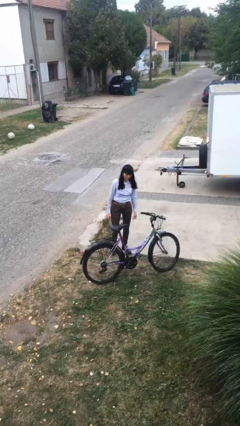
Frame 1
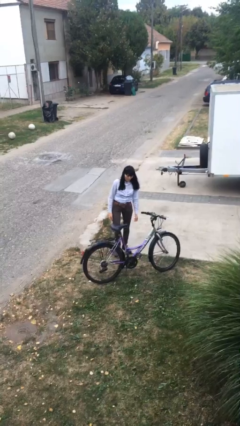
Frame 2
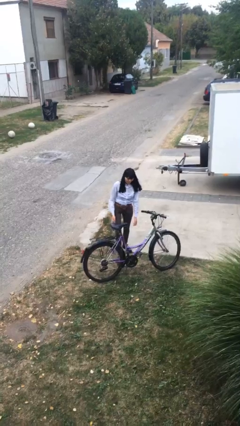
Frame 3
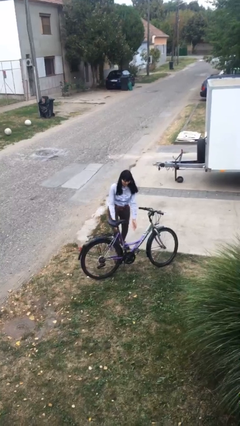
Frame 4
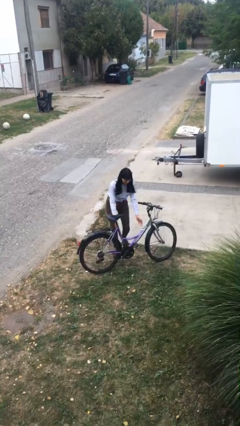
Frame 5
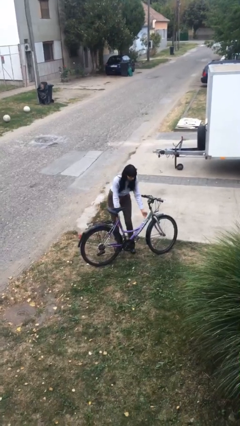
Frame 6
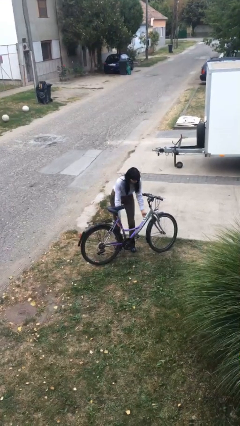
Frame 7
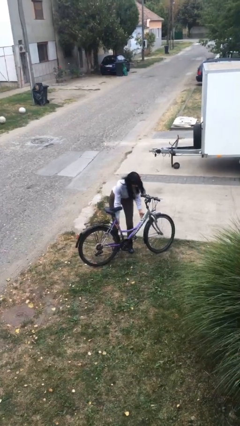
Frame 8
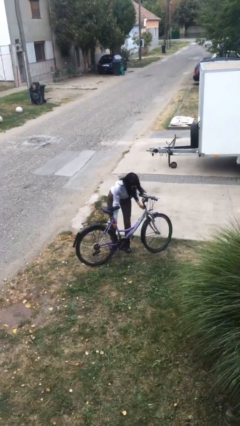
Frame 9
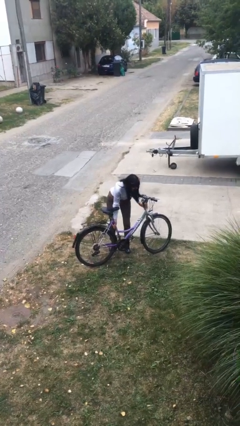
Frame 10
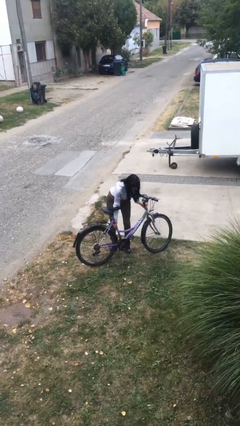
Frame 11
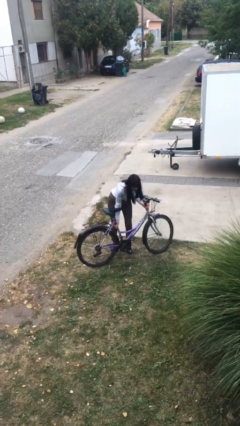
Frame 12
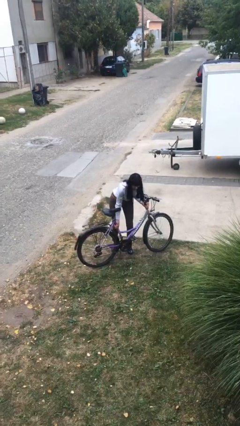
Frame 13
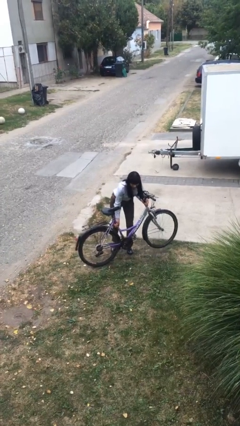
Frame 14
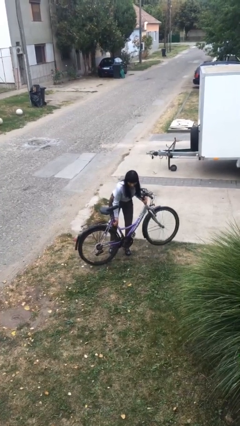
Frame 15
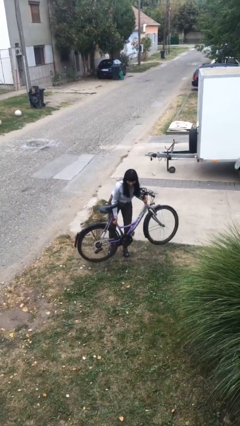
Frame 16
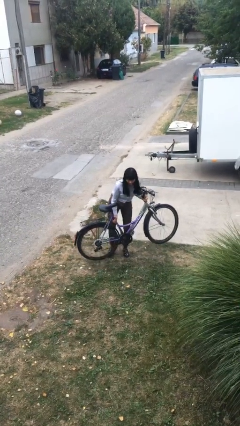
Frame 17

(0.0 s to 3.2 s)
person picks up object from floor

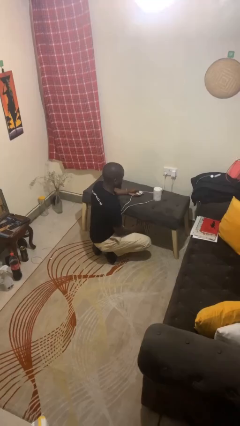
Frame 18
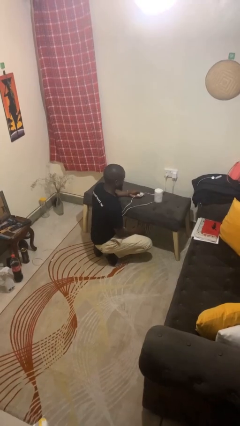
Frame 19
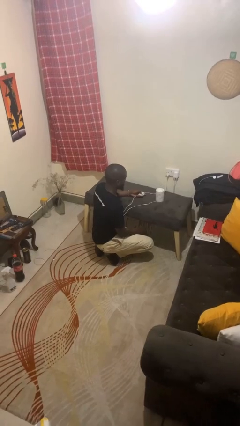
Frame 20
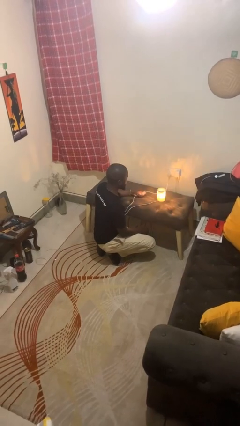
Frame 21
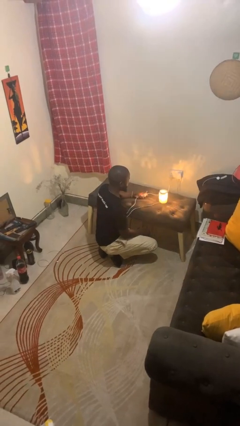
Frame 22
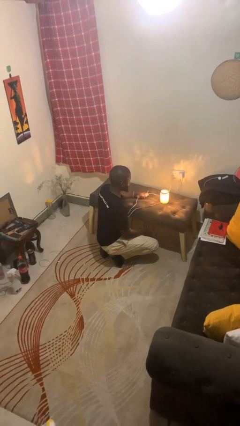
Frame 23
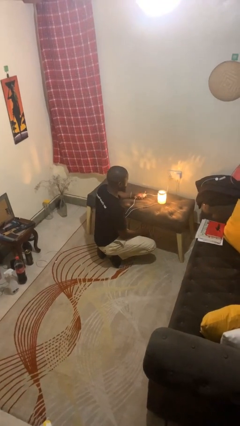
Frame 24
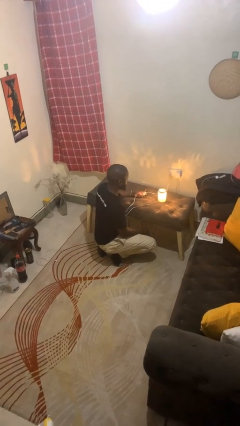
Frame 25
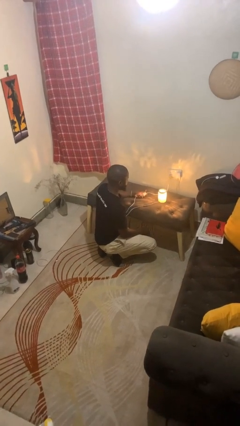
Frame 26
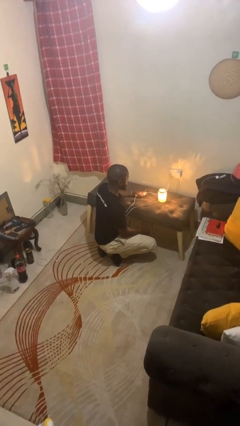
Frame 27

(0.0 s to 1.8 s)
person turns on lamp

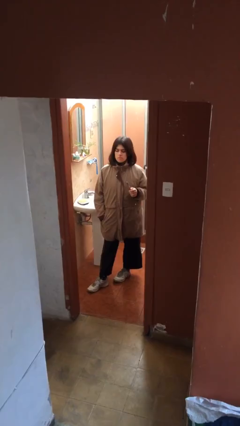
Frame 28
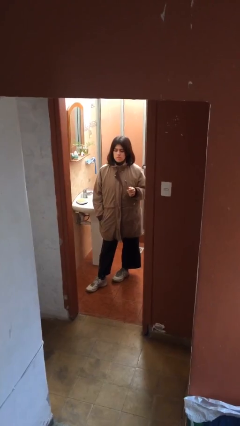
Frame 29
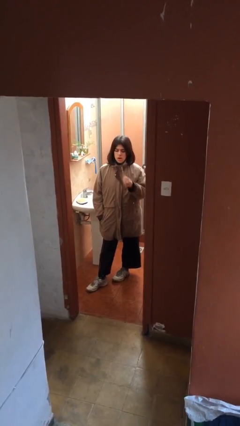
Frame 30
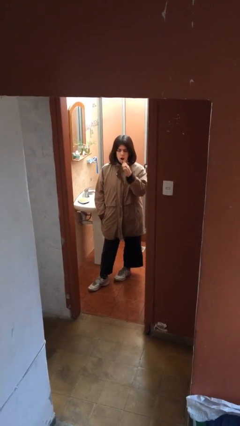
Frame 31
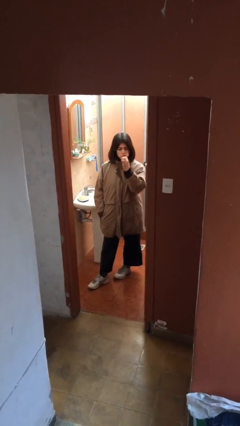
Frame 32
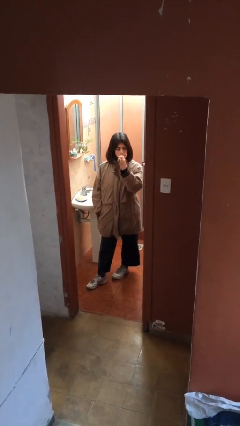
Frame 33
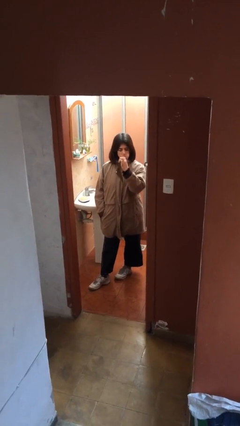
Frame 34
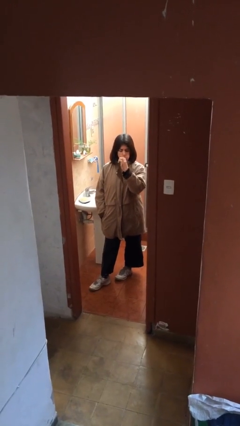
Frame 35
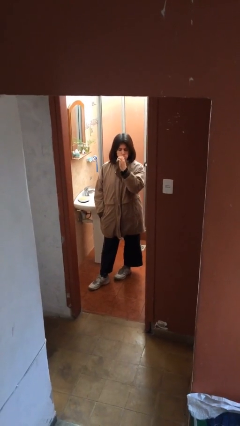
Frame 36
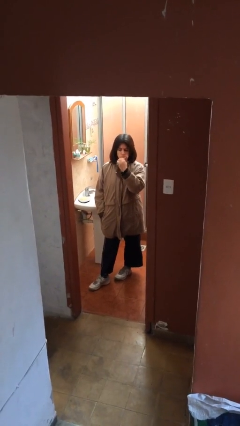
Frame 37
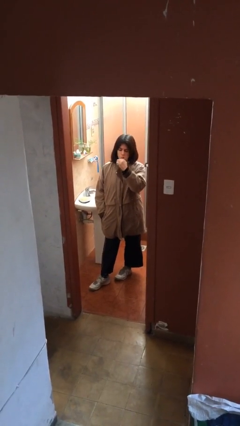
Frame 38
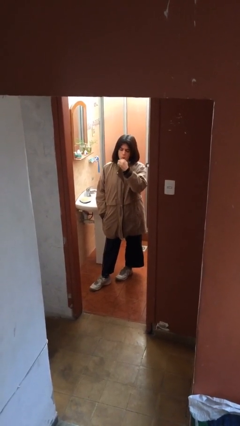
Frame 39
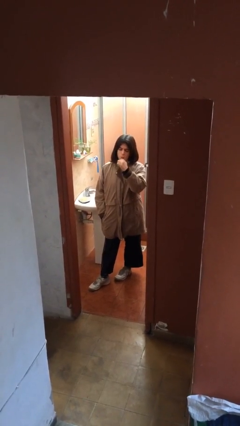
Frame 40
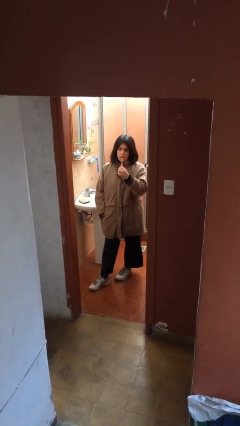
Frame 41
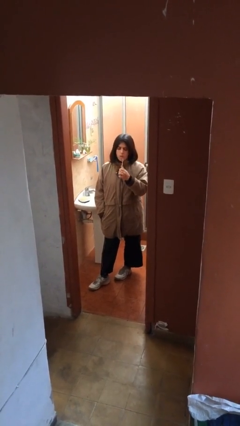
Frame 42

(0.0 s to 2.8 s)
person brushes teeth

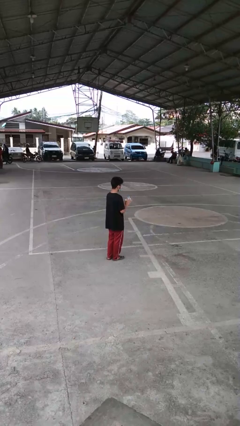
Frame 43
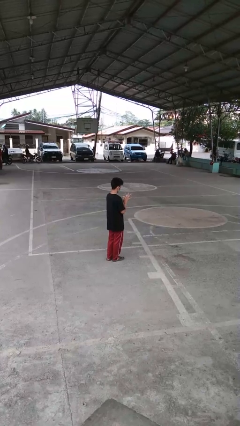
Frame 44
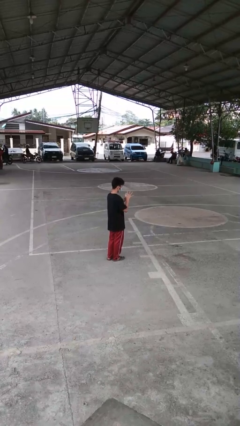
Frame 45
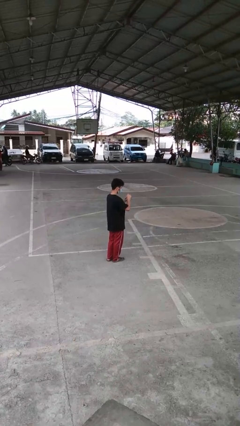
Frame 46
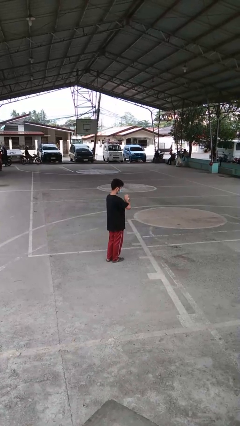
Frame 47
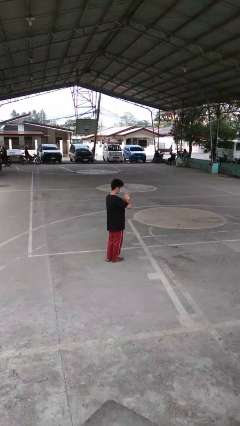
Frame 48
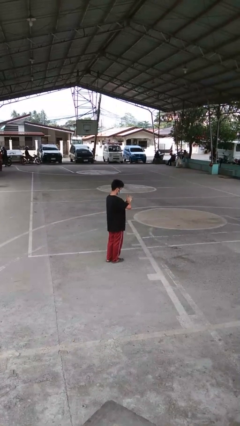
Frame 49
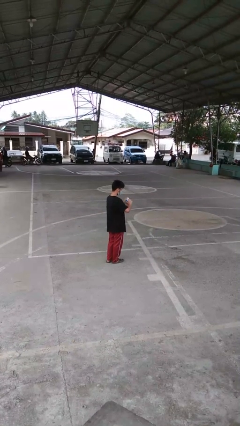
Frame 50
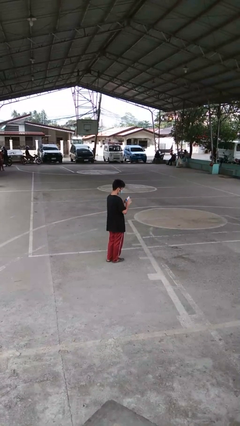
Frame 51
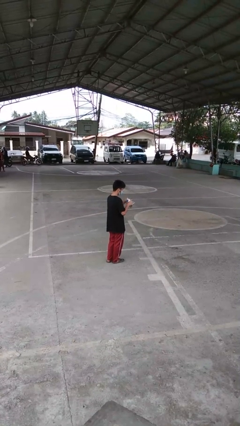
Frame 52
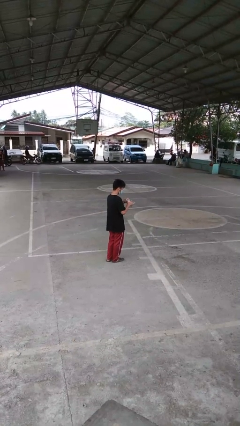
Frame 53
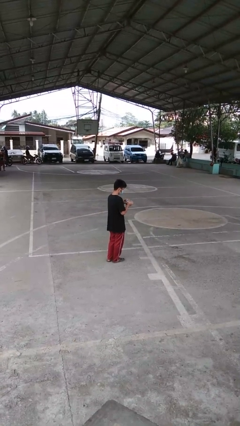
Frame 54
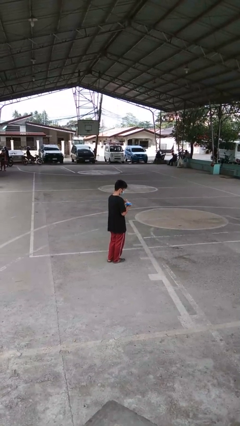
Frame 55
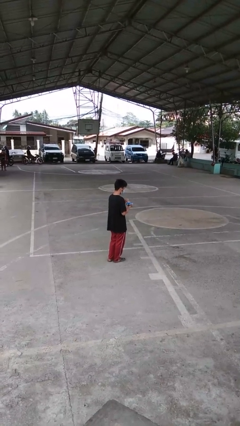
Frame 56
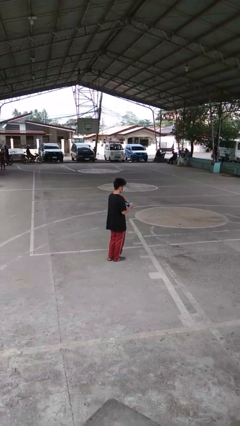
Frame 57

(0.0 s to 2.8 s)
person squeezes object

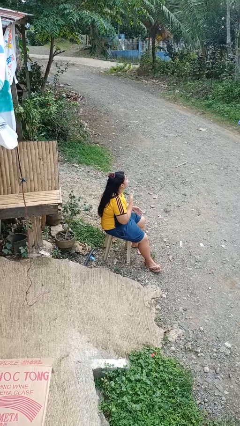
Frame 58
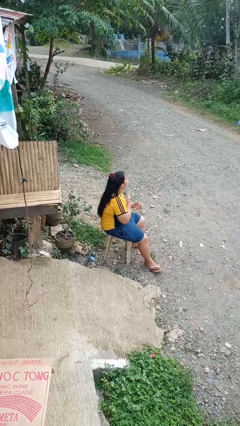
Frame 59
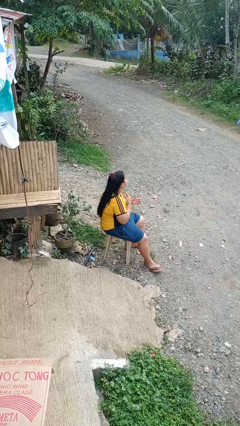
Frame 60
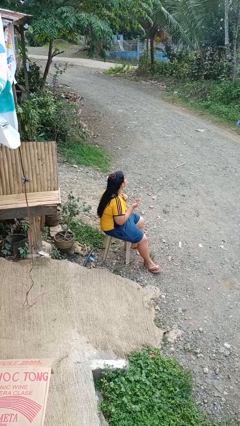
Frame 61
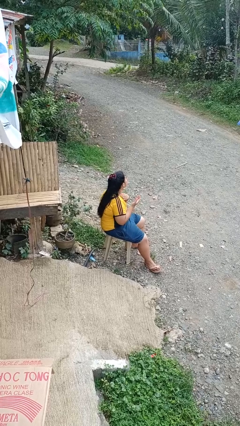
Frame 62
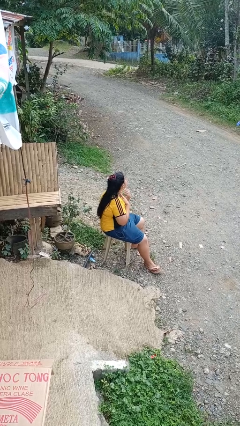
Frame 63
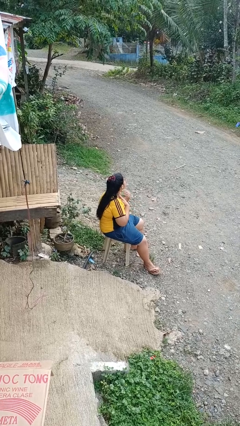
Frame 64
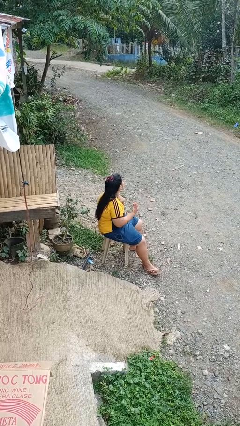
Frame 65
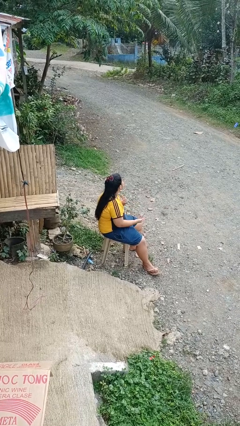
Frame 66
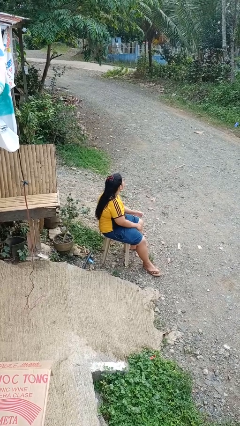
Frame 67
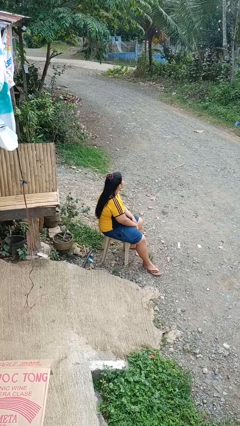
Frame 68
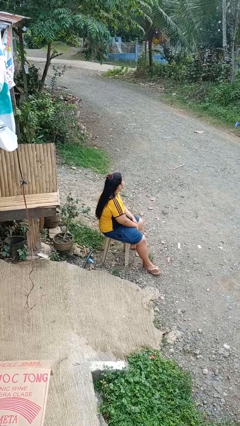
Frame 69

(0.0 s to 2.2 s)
person drums on chest

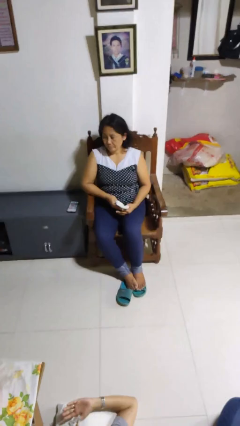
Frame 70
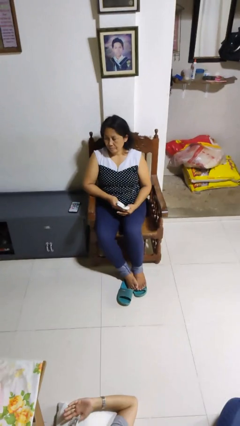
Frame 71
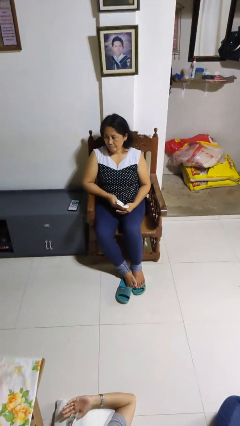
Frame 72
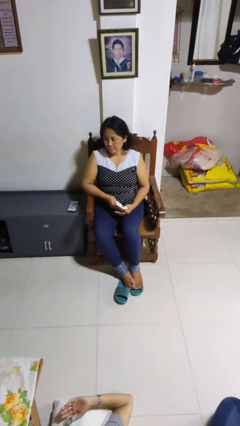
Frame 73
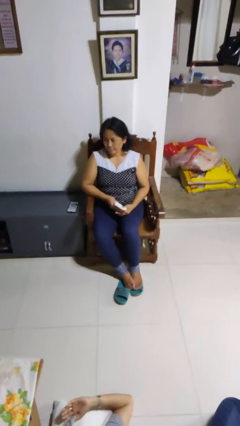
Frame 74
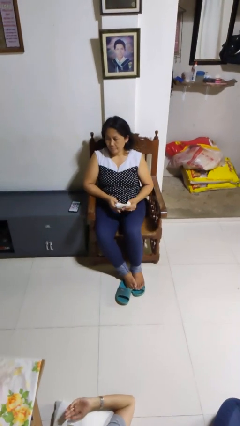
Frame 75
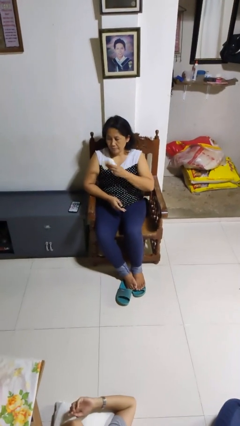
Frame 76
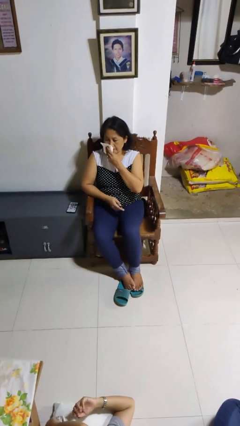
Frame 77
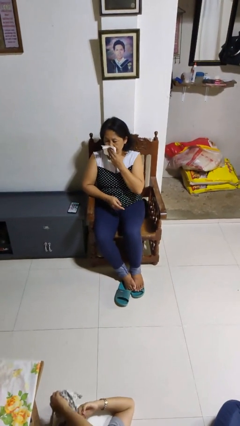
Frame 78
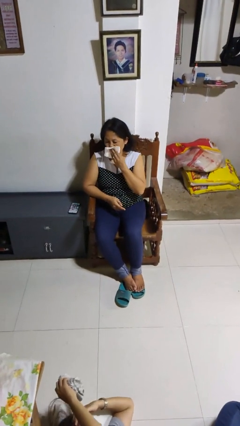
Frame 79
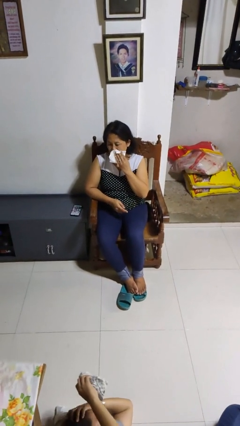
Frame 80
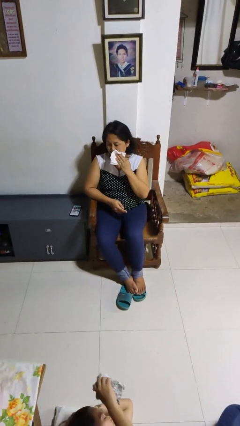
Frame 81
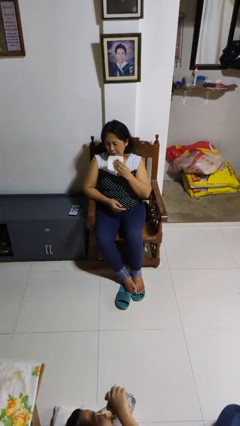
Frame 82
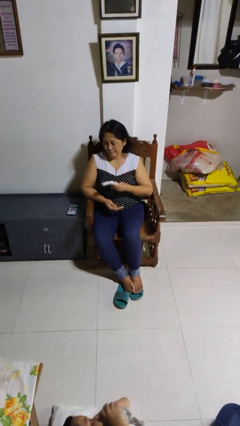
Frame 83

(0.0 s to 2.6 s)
person wipes mouth with napkin

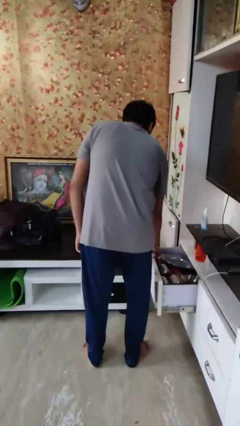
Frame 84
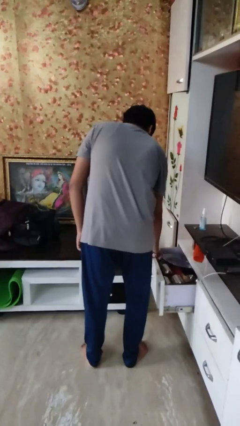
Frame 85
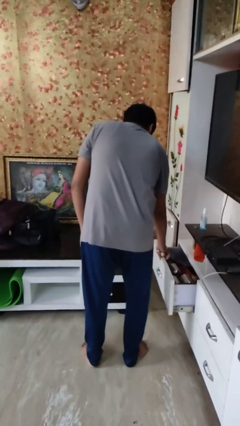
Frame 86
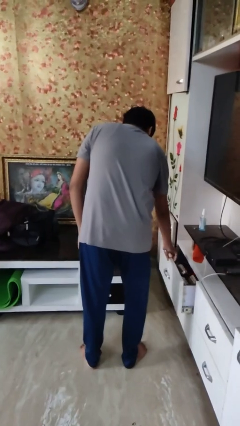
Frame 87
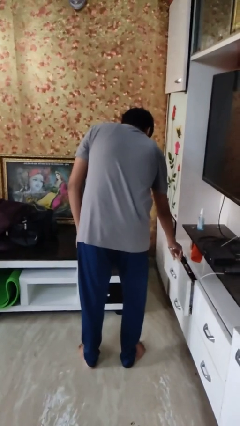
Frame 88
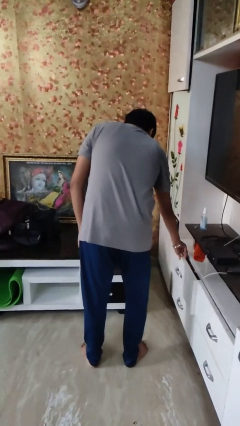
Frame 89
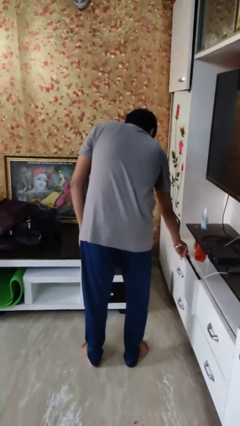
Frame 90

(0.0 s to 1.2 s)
person closes kitchen drawer
